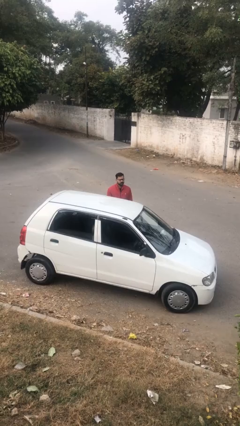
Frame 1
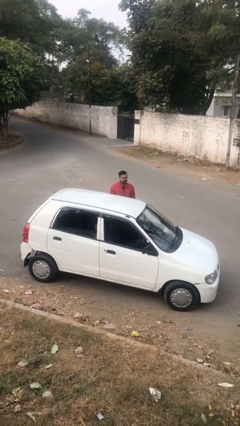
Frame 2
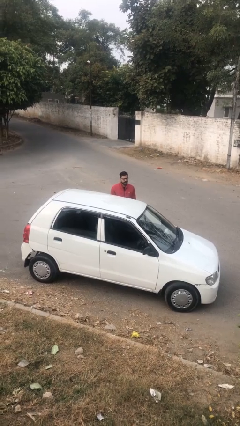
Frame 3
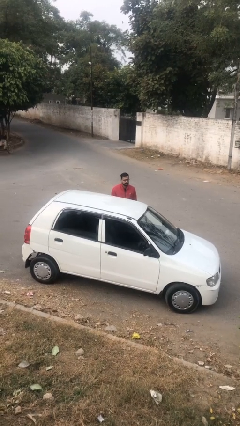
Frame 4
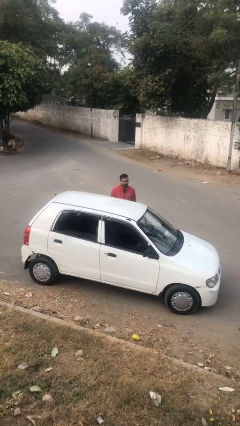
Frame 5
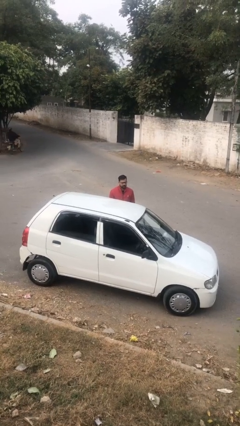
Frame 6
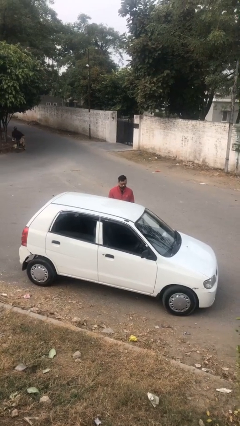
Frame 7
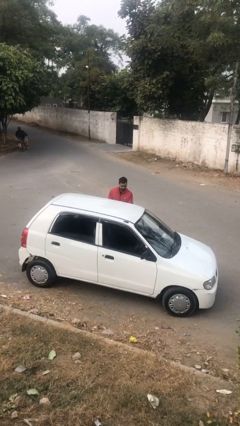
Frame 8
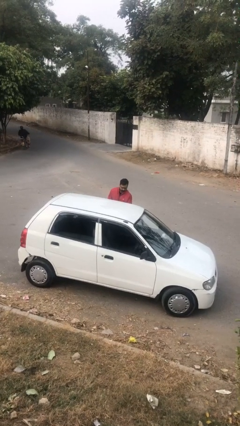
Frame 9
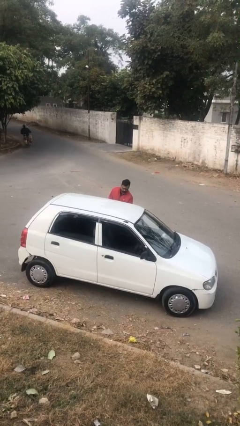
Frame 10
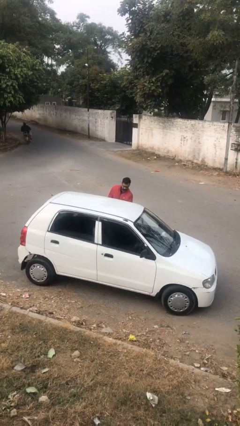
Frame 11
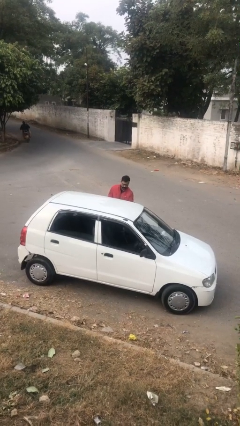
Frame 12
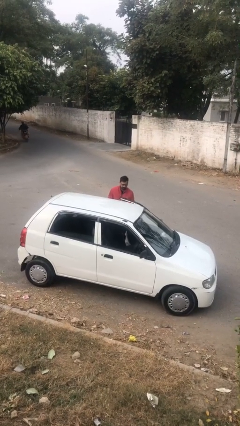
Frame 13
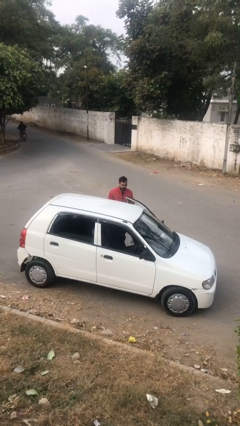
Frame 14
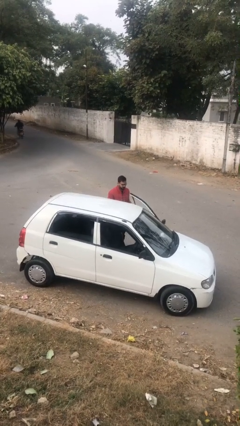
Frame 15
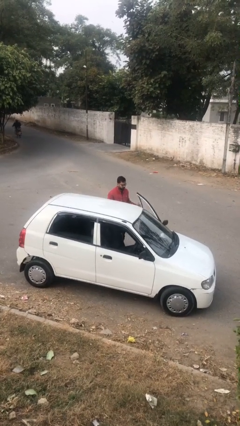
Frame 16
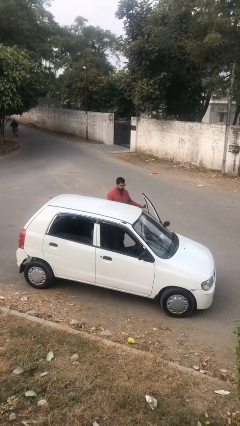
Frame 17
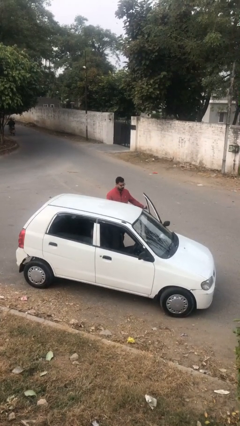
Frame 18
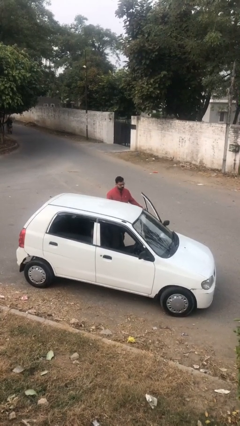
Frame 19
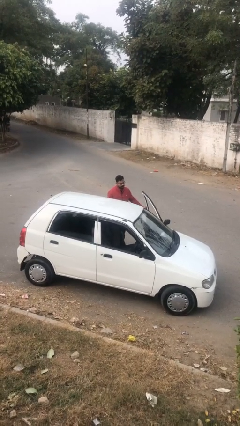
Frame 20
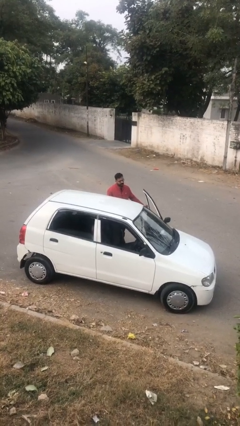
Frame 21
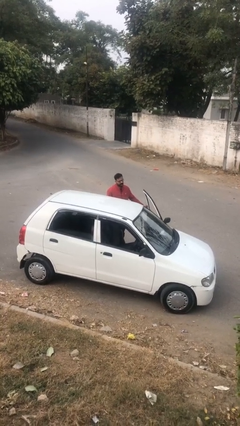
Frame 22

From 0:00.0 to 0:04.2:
person opens car door

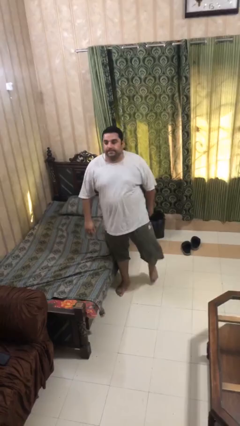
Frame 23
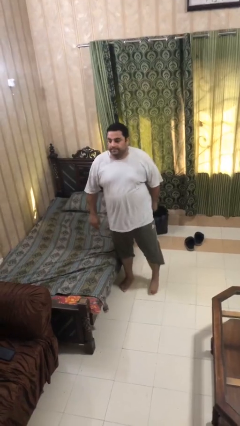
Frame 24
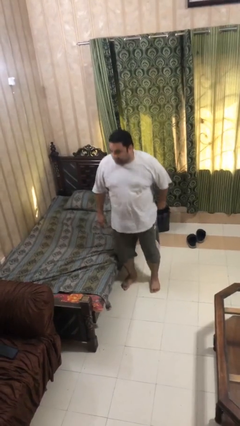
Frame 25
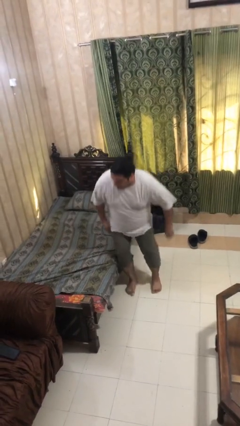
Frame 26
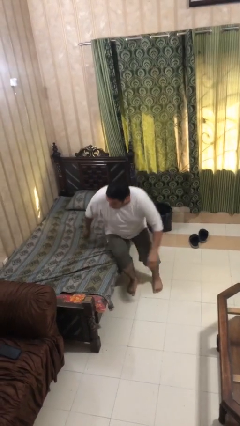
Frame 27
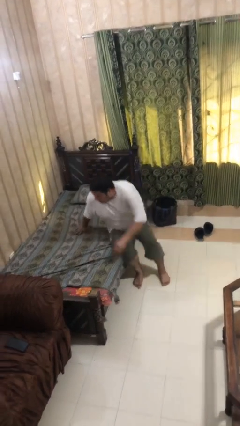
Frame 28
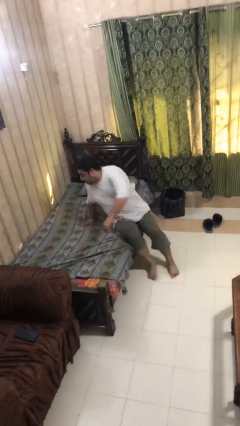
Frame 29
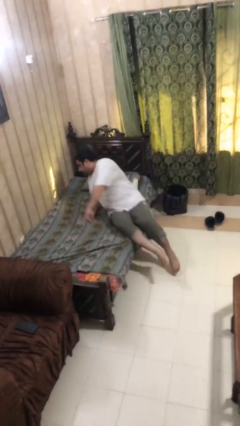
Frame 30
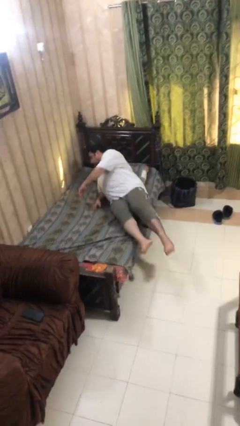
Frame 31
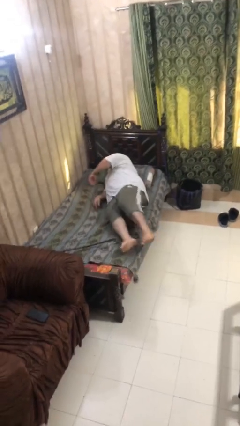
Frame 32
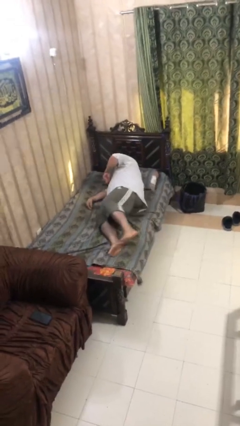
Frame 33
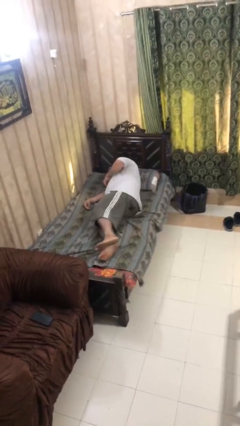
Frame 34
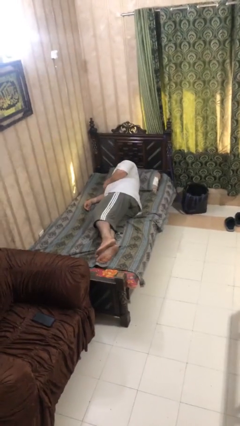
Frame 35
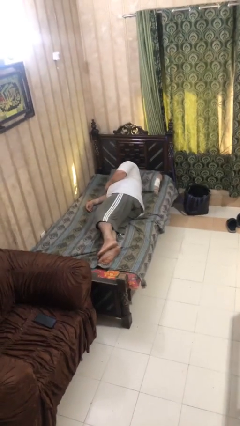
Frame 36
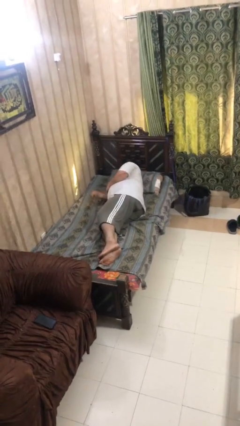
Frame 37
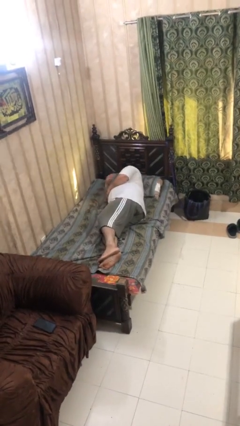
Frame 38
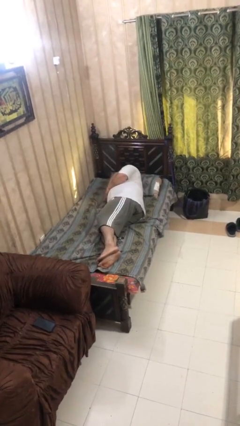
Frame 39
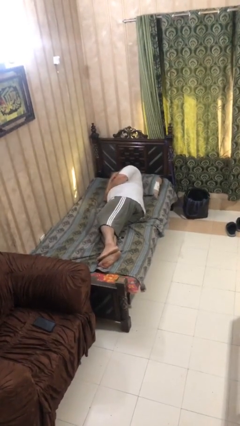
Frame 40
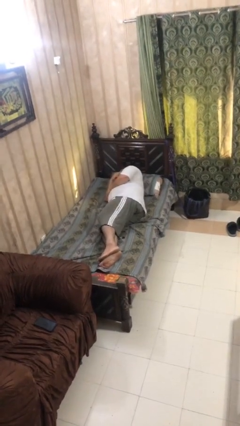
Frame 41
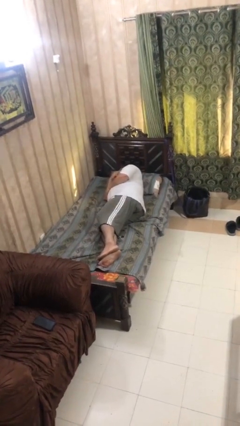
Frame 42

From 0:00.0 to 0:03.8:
person lies down on bed

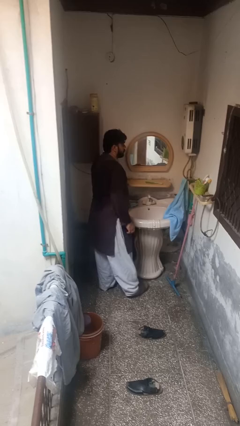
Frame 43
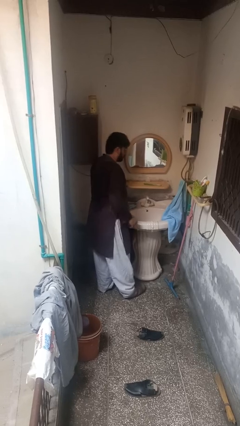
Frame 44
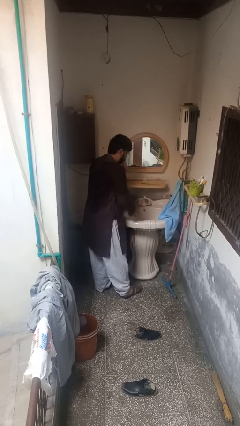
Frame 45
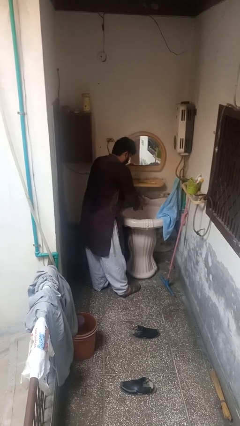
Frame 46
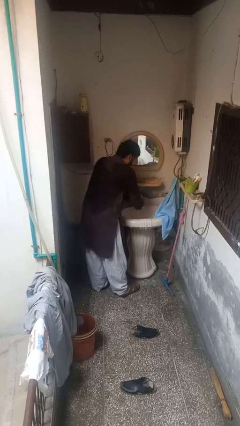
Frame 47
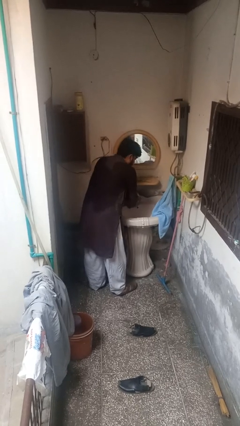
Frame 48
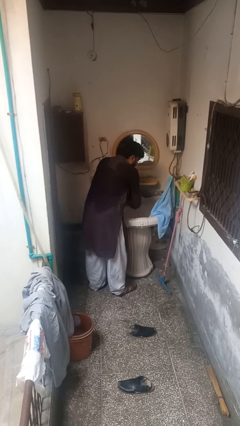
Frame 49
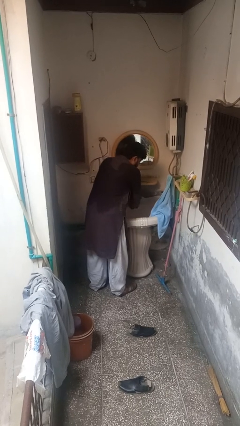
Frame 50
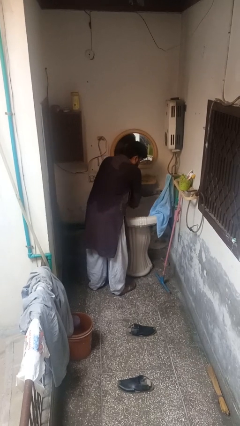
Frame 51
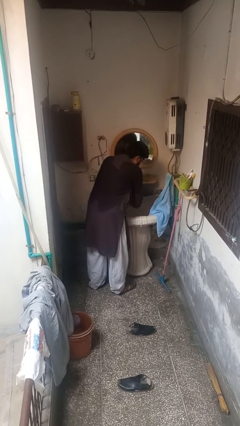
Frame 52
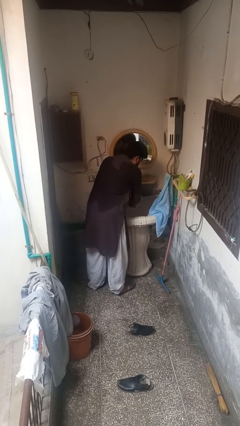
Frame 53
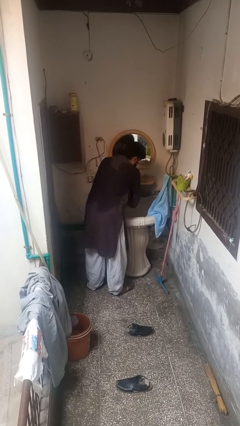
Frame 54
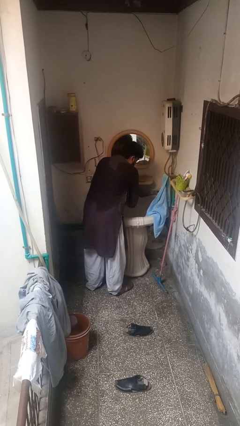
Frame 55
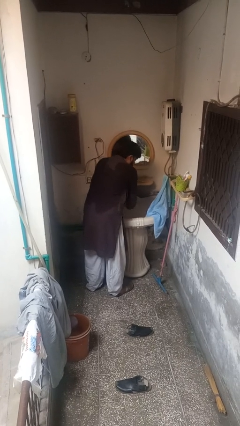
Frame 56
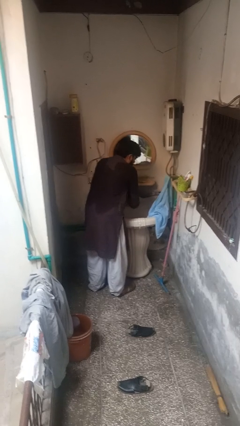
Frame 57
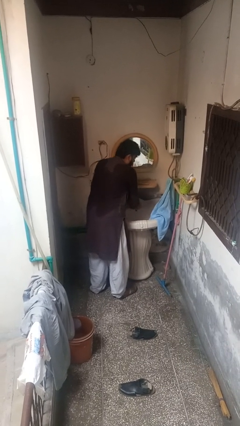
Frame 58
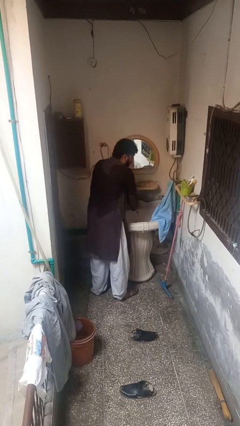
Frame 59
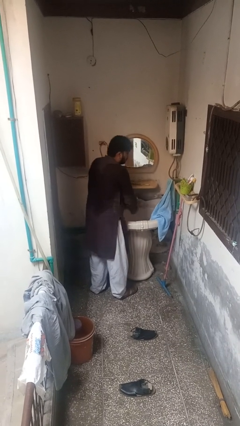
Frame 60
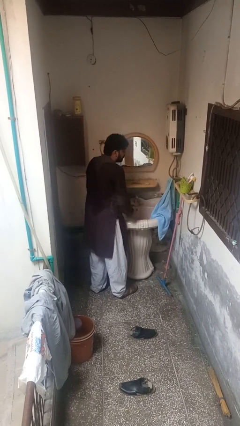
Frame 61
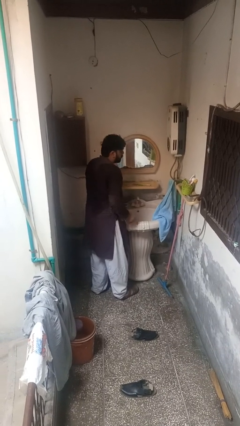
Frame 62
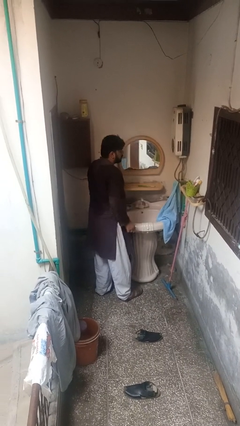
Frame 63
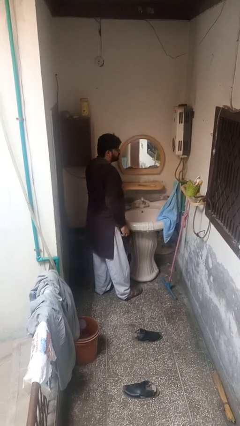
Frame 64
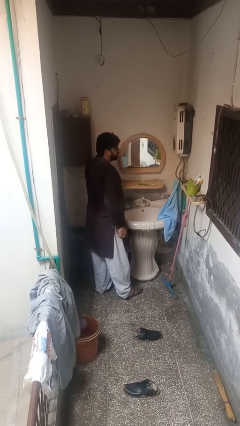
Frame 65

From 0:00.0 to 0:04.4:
person washes hands

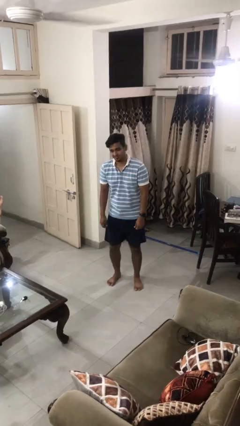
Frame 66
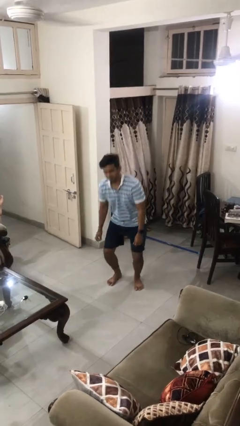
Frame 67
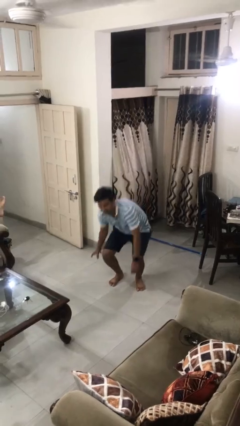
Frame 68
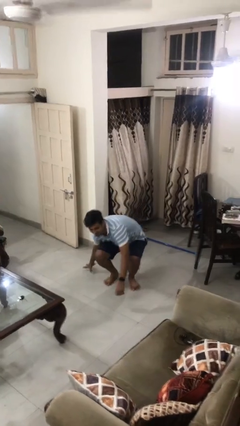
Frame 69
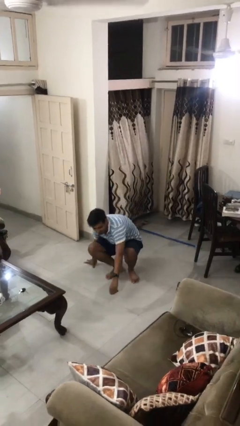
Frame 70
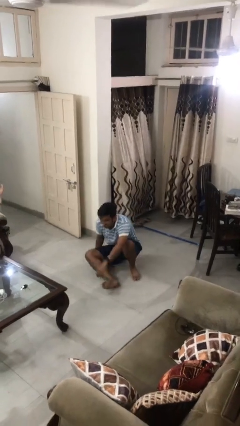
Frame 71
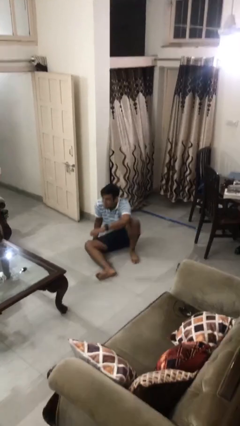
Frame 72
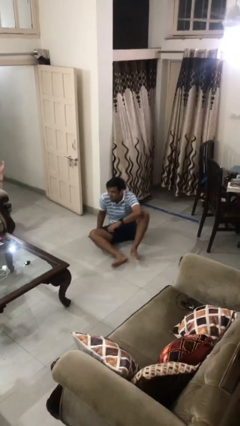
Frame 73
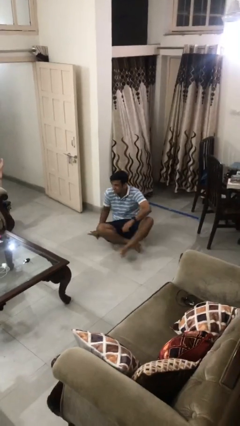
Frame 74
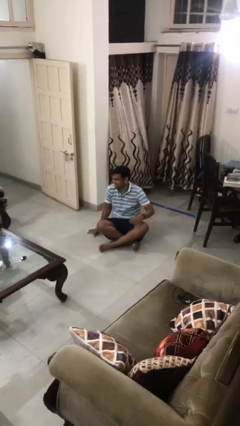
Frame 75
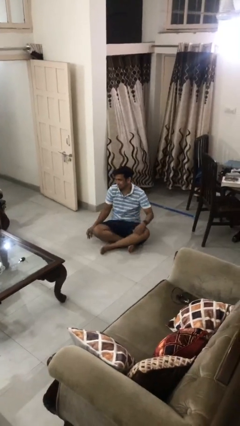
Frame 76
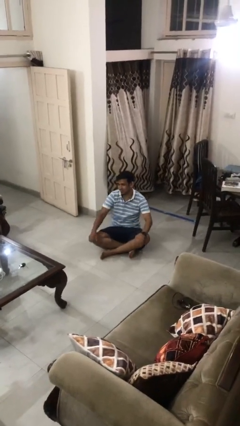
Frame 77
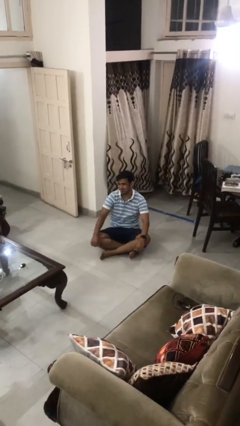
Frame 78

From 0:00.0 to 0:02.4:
person sits crisscross

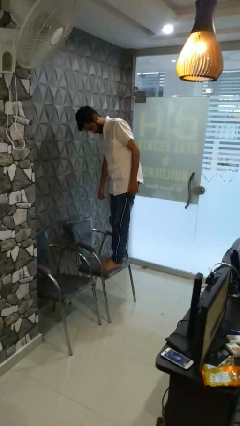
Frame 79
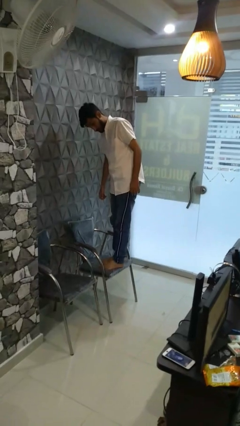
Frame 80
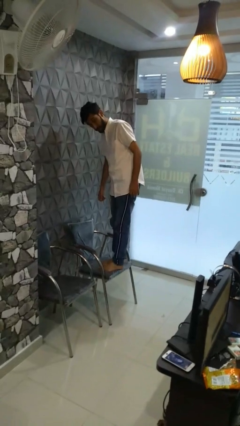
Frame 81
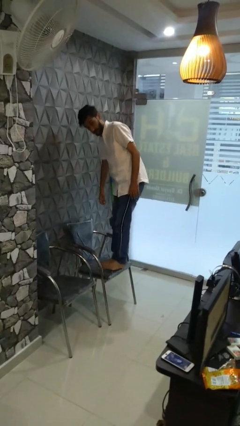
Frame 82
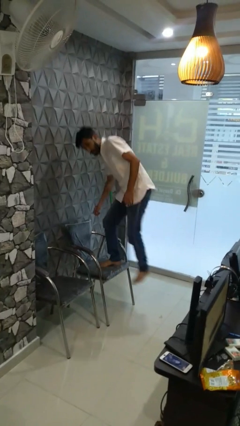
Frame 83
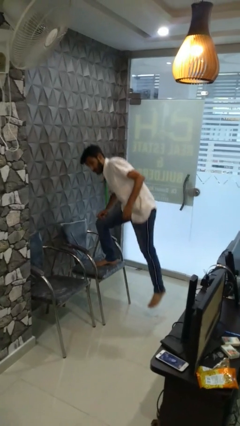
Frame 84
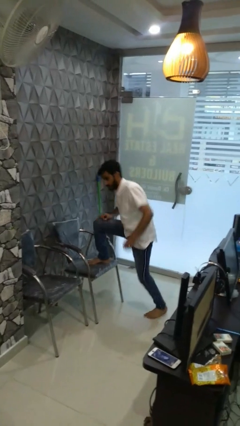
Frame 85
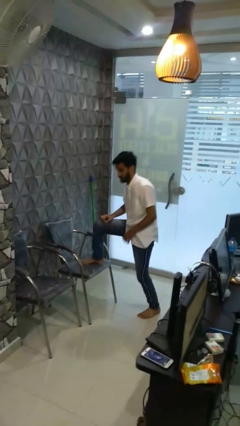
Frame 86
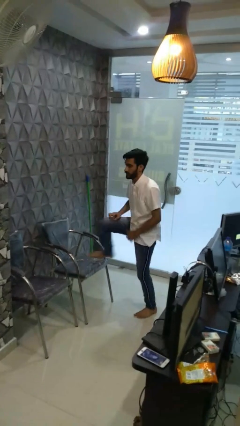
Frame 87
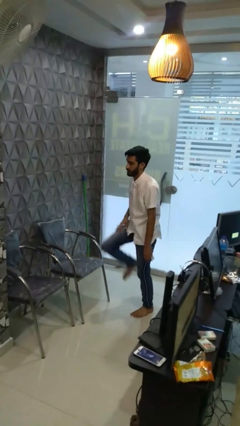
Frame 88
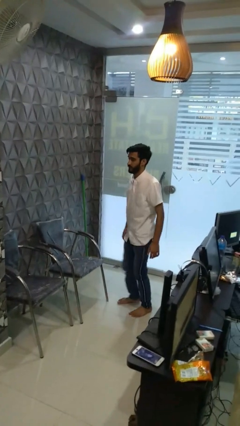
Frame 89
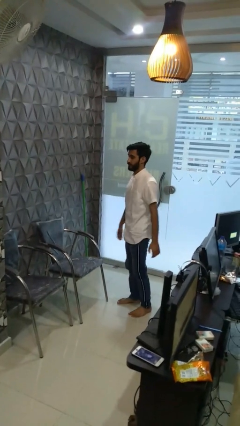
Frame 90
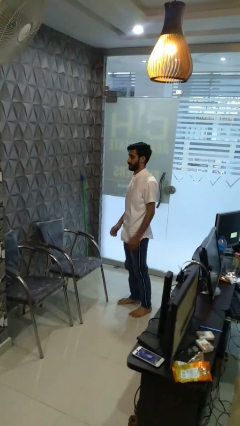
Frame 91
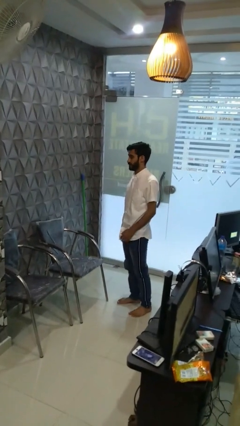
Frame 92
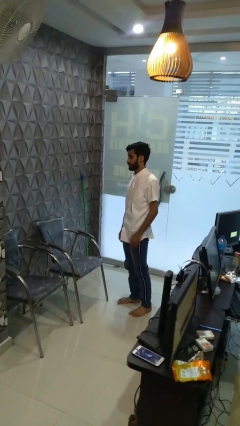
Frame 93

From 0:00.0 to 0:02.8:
person climbs off chair
